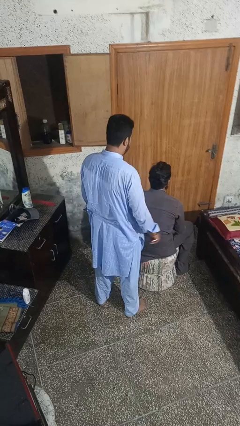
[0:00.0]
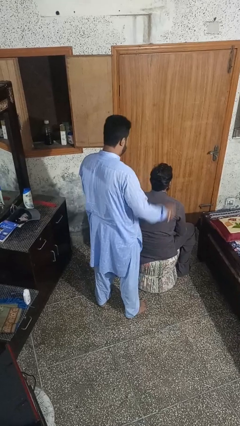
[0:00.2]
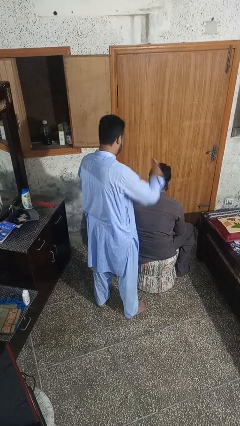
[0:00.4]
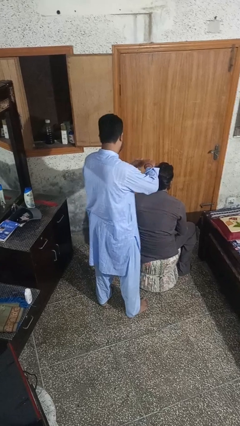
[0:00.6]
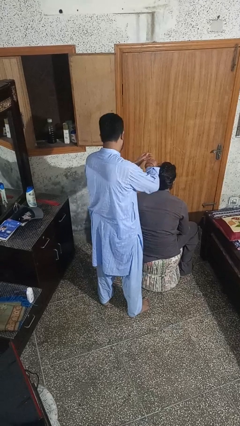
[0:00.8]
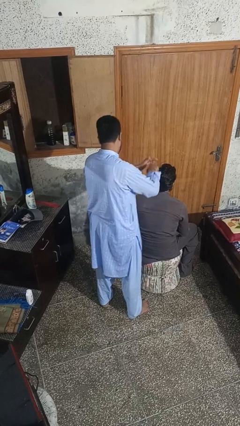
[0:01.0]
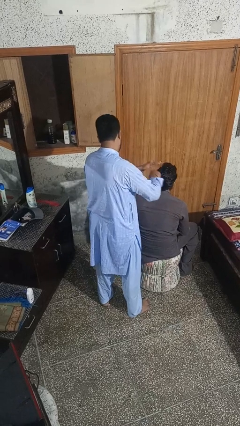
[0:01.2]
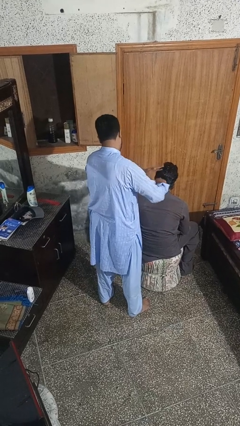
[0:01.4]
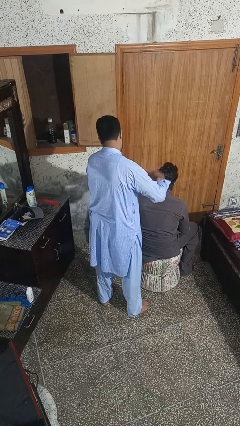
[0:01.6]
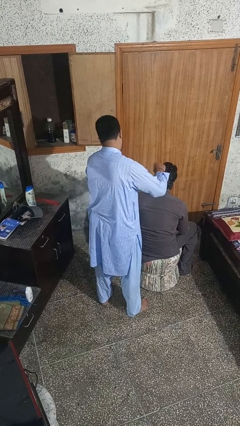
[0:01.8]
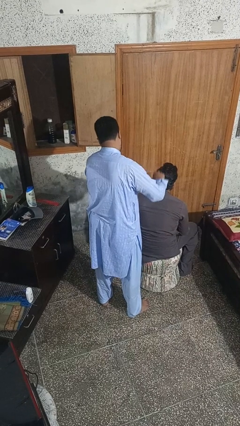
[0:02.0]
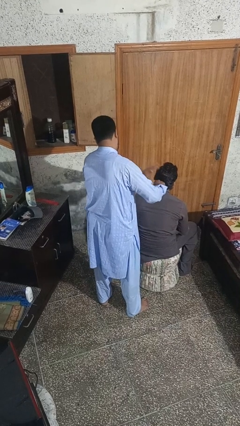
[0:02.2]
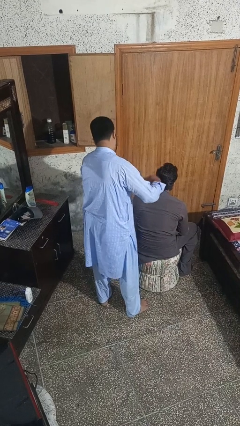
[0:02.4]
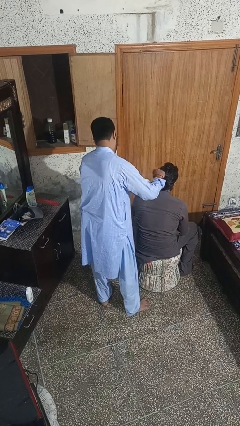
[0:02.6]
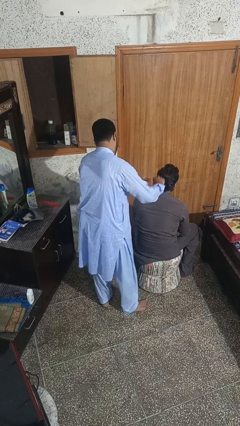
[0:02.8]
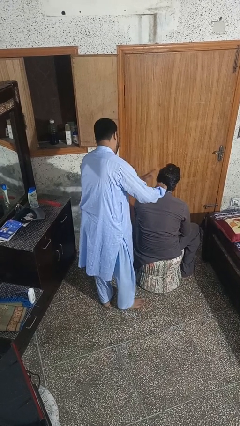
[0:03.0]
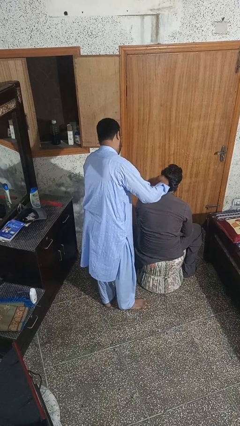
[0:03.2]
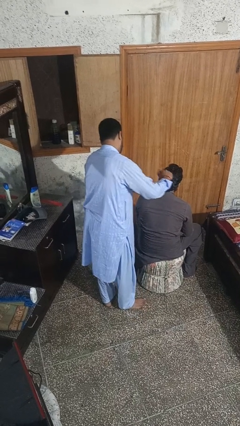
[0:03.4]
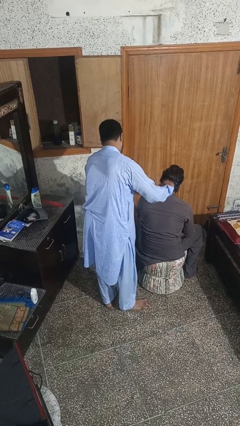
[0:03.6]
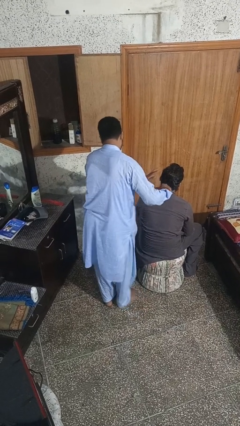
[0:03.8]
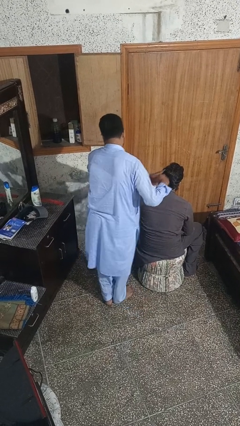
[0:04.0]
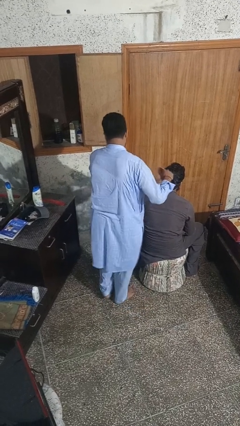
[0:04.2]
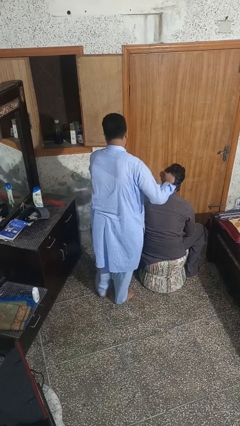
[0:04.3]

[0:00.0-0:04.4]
person brushes hair of person

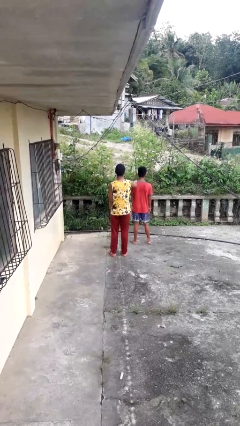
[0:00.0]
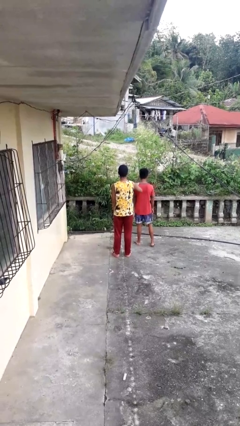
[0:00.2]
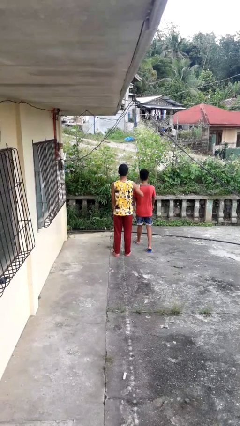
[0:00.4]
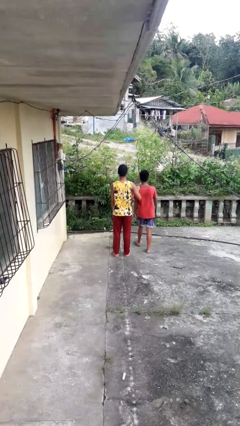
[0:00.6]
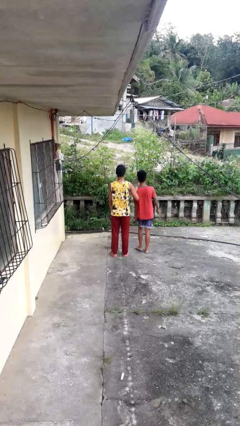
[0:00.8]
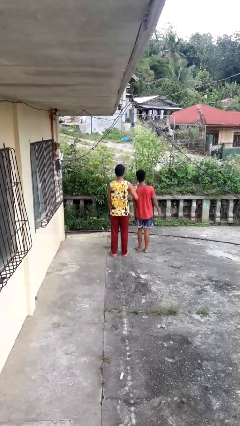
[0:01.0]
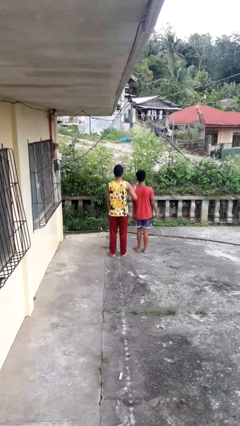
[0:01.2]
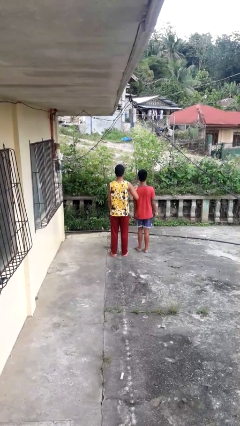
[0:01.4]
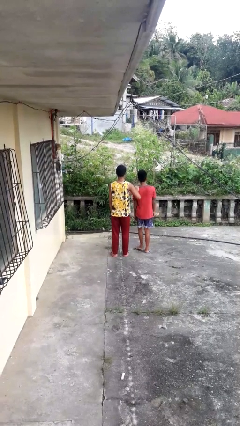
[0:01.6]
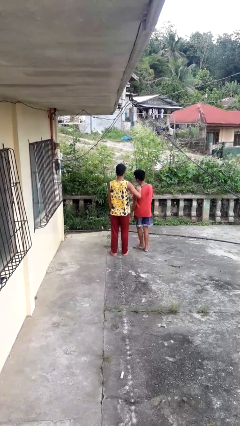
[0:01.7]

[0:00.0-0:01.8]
person grabs person by shoulder

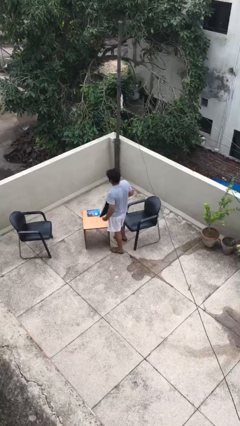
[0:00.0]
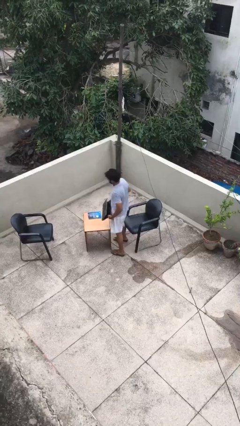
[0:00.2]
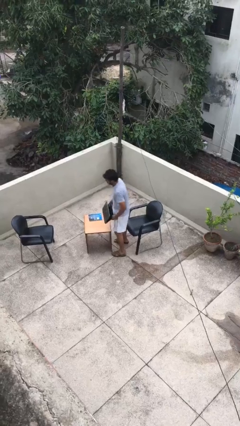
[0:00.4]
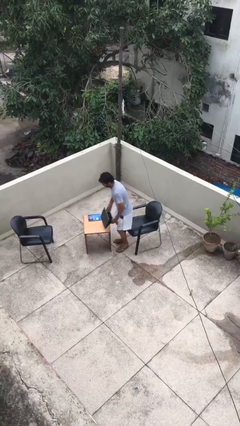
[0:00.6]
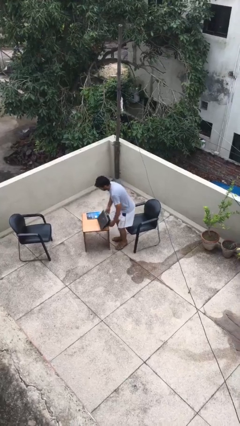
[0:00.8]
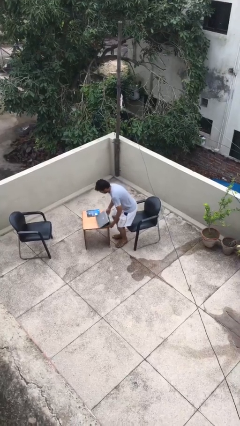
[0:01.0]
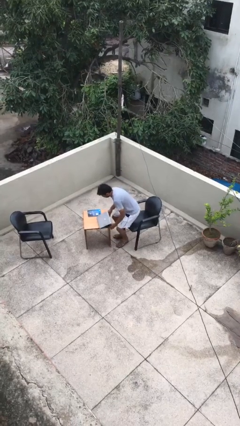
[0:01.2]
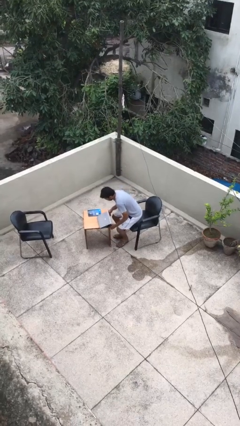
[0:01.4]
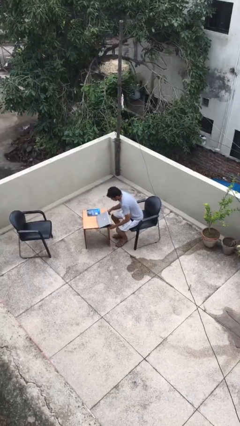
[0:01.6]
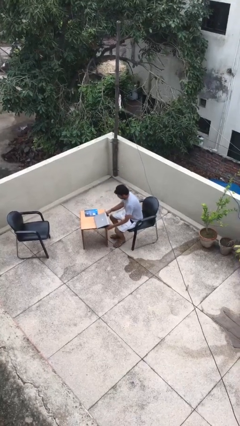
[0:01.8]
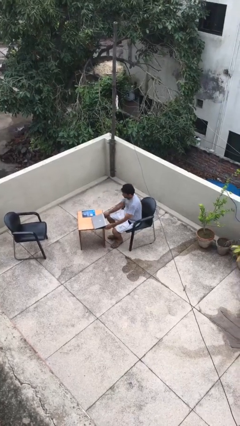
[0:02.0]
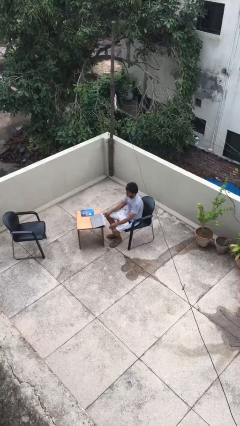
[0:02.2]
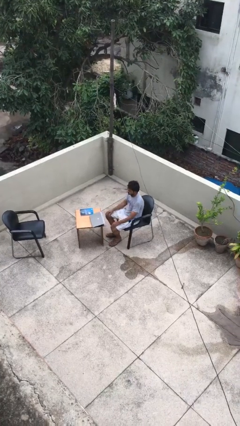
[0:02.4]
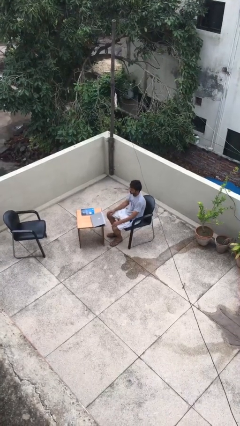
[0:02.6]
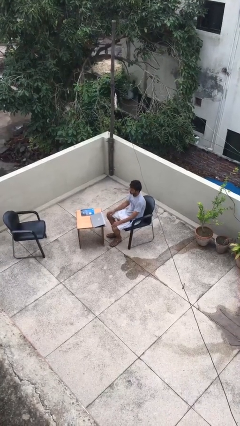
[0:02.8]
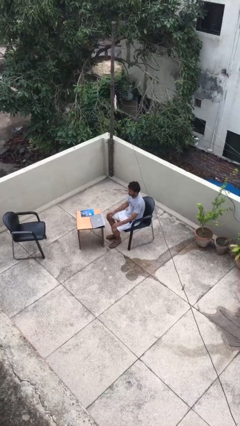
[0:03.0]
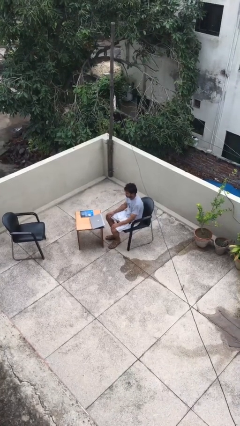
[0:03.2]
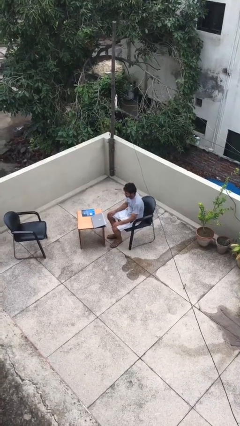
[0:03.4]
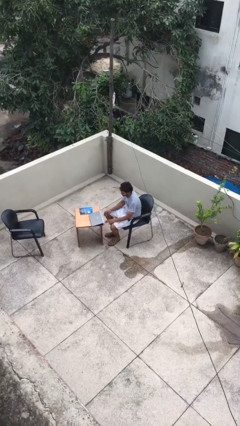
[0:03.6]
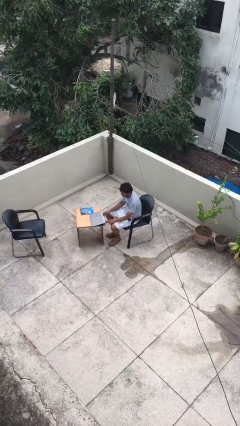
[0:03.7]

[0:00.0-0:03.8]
person sits down

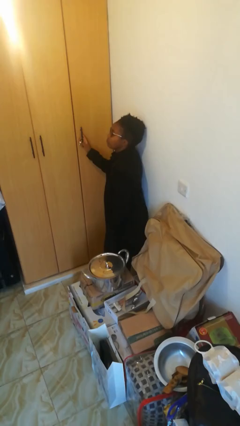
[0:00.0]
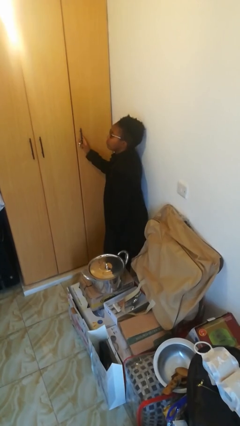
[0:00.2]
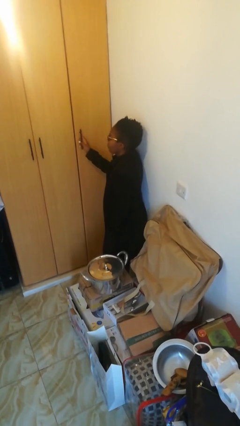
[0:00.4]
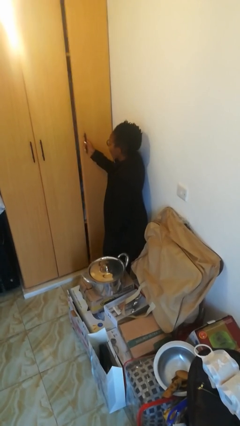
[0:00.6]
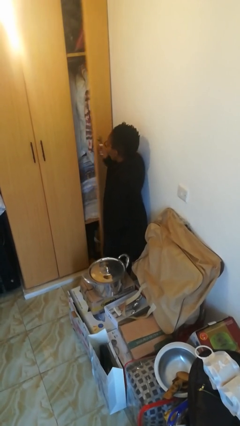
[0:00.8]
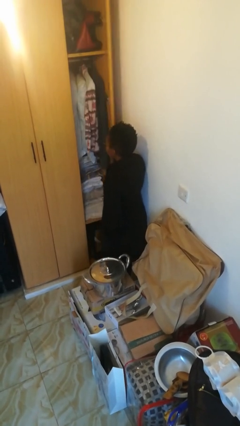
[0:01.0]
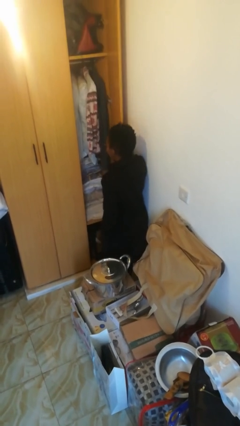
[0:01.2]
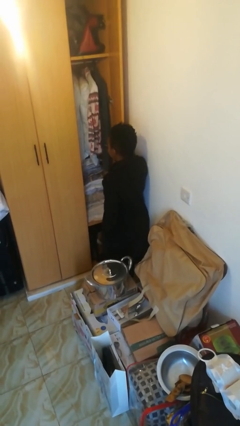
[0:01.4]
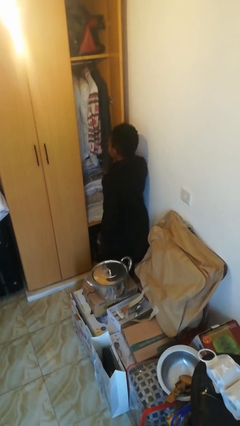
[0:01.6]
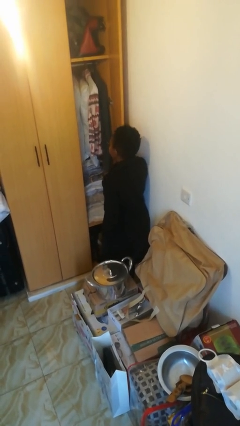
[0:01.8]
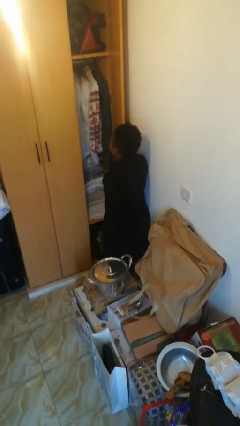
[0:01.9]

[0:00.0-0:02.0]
person opens closet door

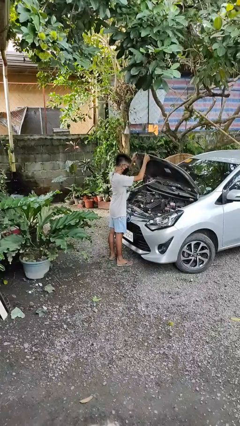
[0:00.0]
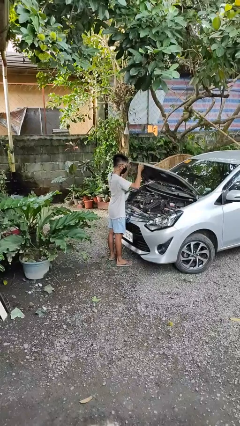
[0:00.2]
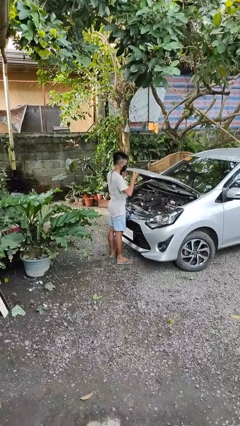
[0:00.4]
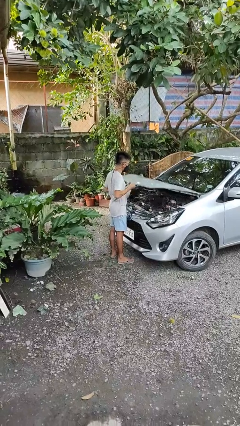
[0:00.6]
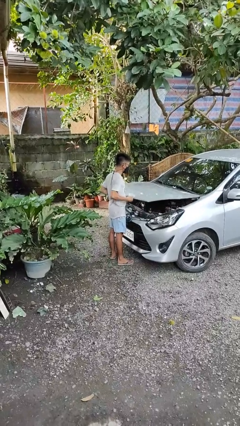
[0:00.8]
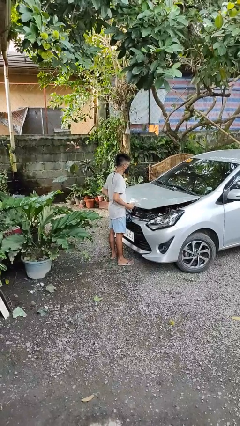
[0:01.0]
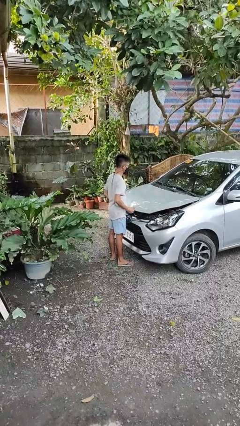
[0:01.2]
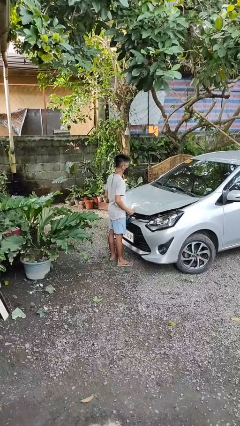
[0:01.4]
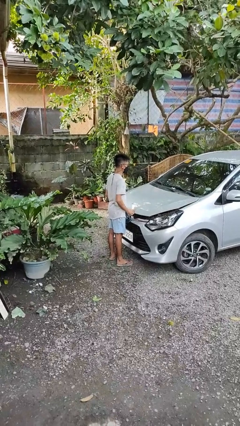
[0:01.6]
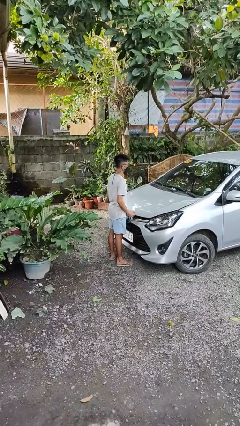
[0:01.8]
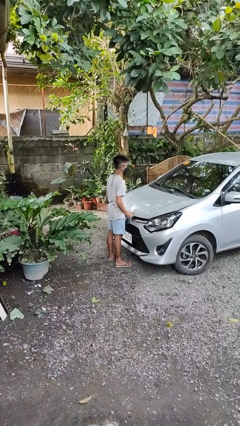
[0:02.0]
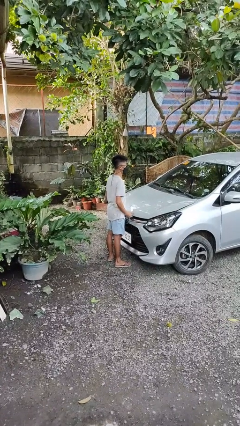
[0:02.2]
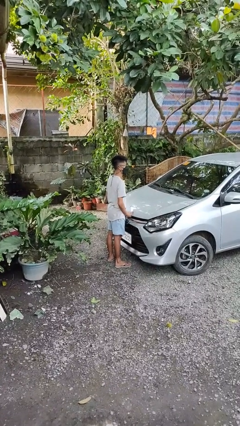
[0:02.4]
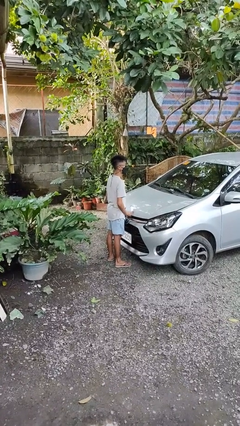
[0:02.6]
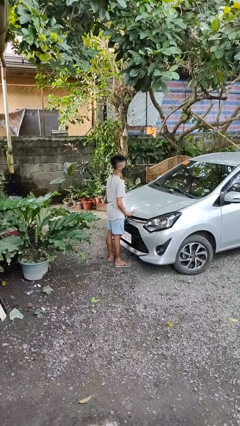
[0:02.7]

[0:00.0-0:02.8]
person closes car hood

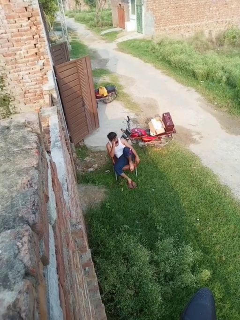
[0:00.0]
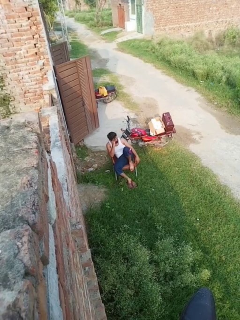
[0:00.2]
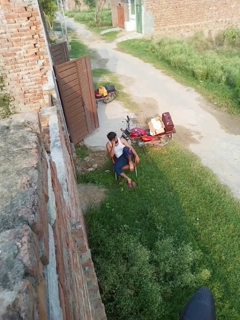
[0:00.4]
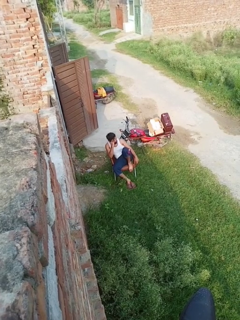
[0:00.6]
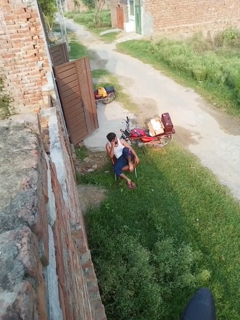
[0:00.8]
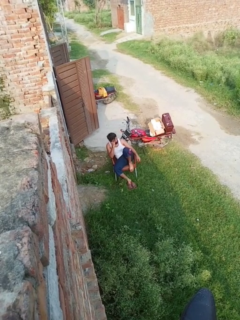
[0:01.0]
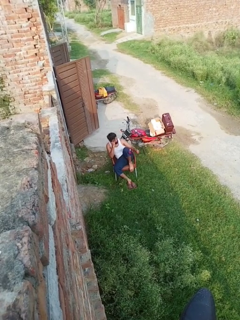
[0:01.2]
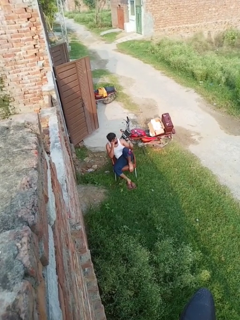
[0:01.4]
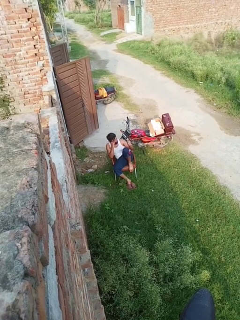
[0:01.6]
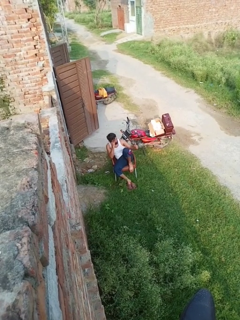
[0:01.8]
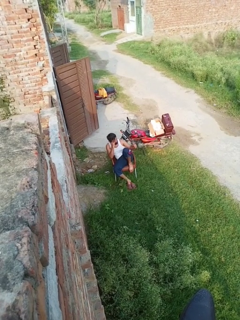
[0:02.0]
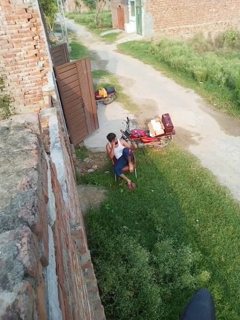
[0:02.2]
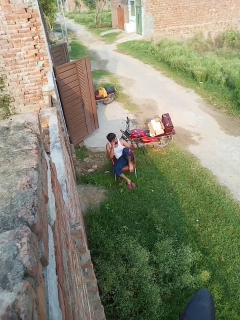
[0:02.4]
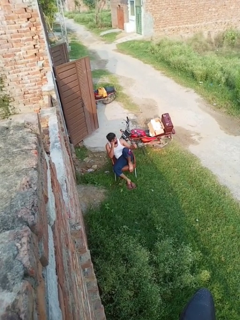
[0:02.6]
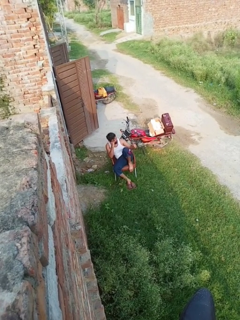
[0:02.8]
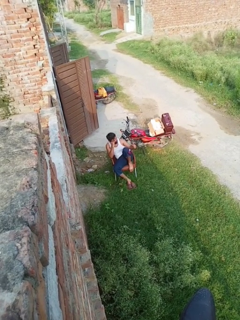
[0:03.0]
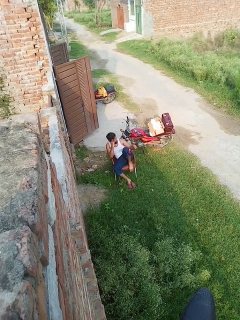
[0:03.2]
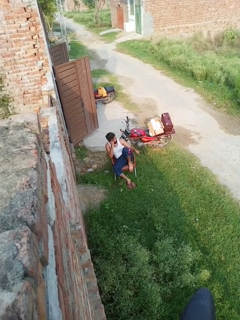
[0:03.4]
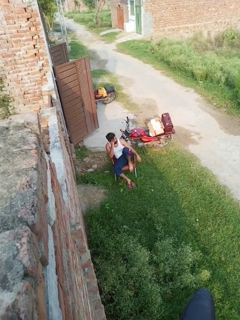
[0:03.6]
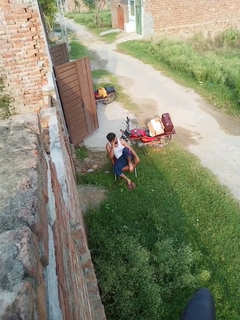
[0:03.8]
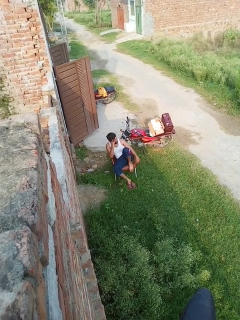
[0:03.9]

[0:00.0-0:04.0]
person gestures thumbs up
